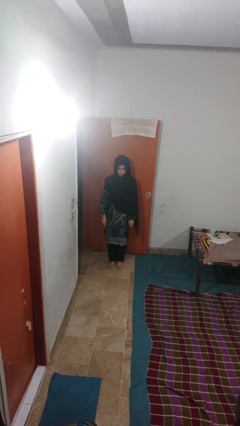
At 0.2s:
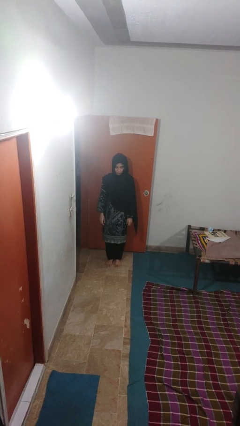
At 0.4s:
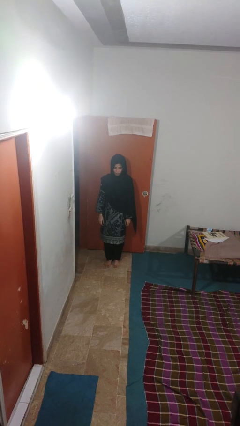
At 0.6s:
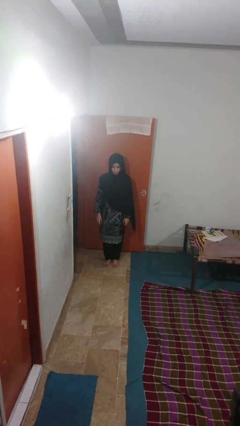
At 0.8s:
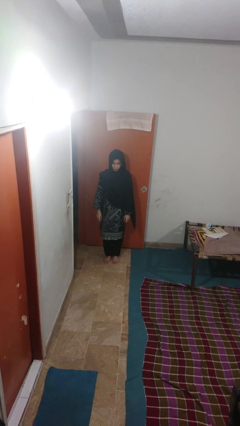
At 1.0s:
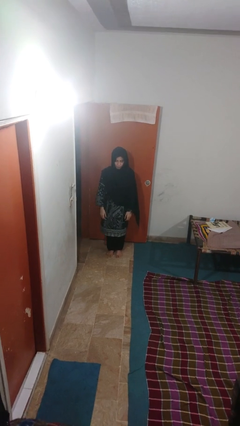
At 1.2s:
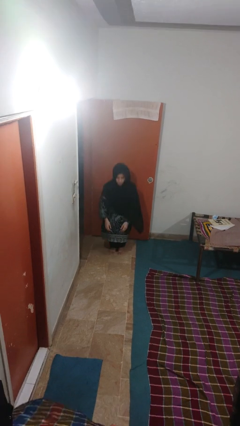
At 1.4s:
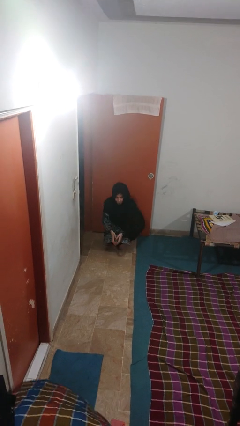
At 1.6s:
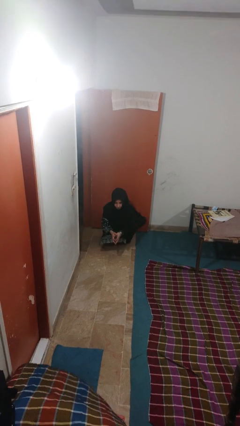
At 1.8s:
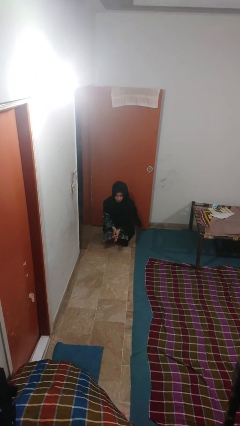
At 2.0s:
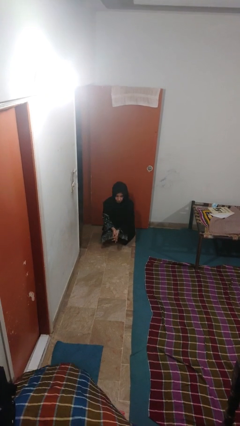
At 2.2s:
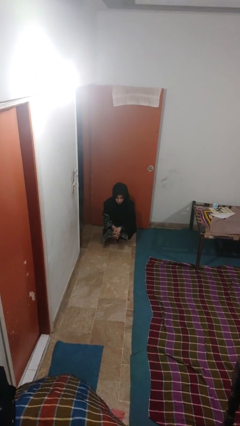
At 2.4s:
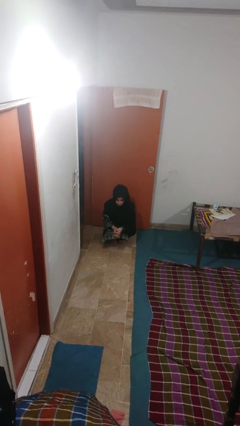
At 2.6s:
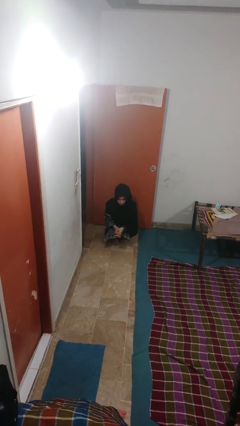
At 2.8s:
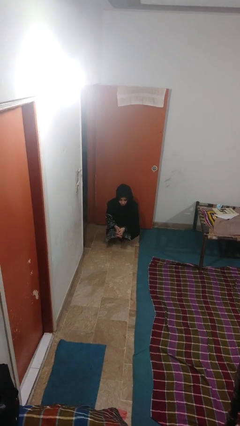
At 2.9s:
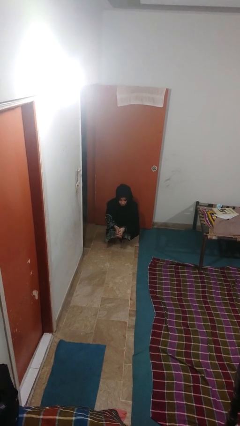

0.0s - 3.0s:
person squats

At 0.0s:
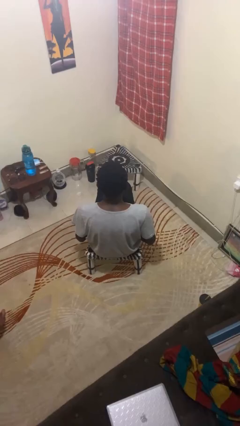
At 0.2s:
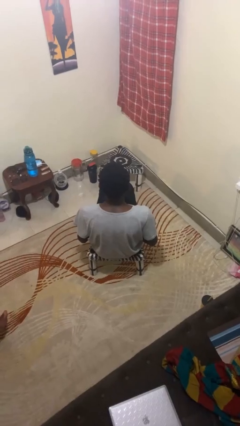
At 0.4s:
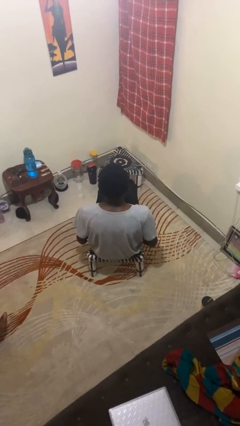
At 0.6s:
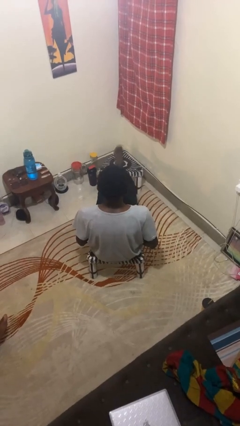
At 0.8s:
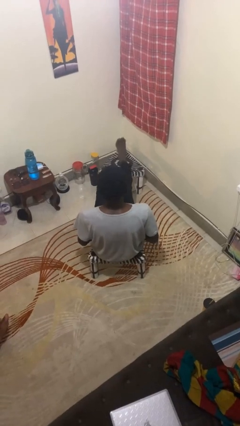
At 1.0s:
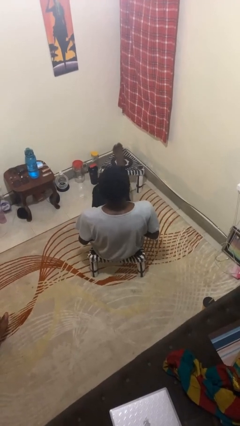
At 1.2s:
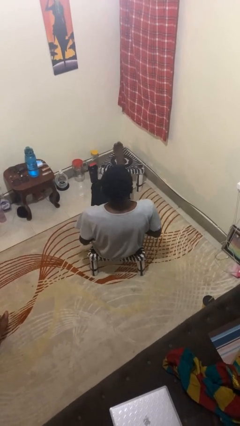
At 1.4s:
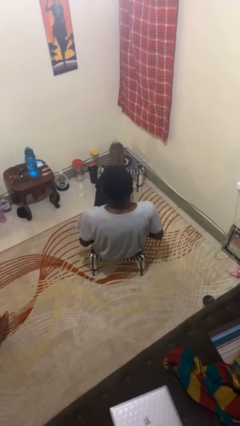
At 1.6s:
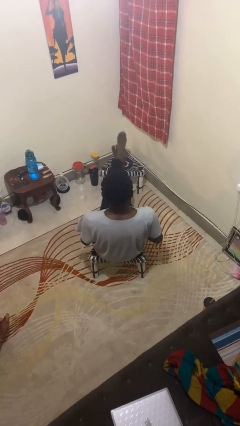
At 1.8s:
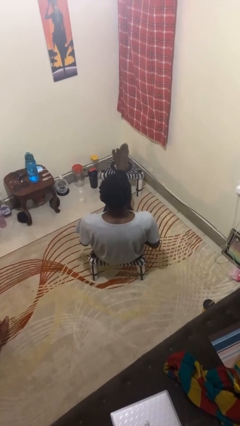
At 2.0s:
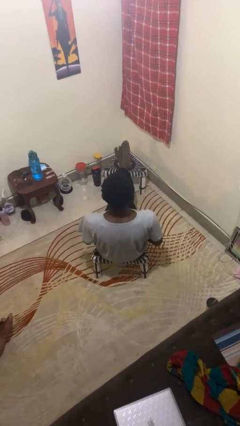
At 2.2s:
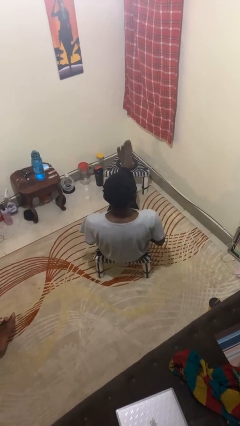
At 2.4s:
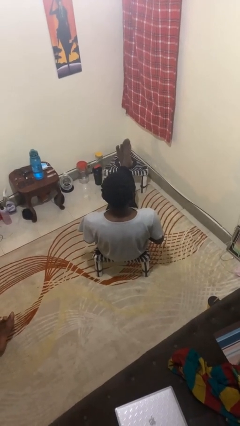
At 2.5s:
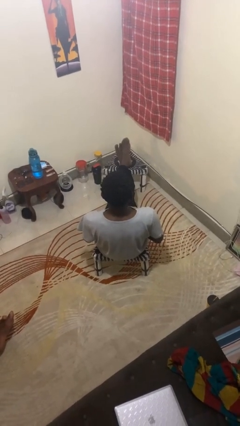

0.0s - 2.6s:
person puts feet up

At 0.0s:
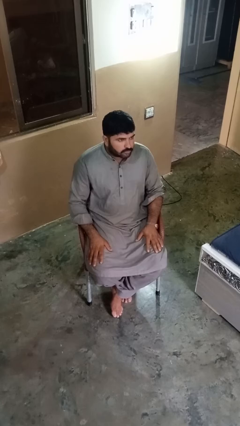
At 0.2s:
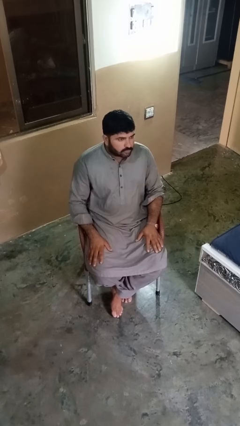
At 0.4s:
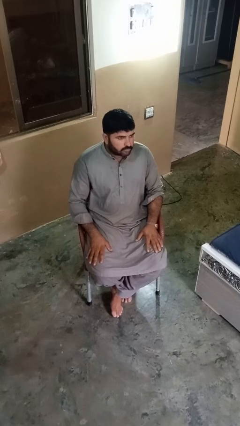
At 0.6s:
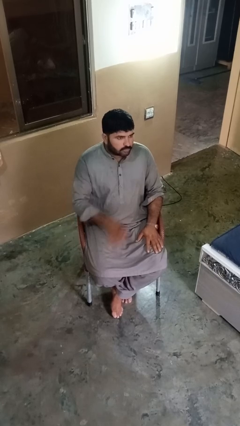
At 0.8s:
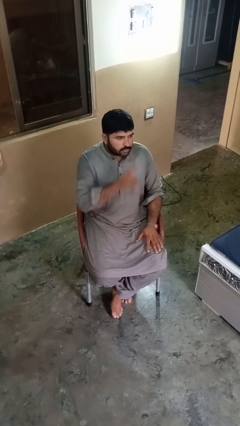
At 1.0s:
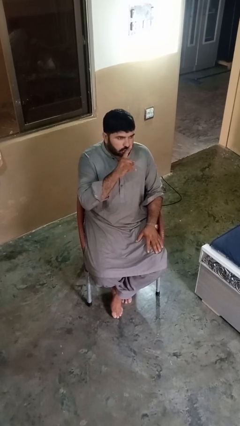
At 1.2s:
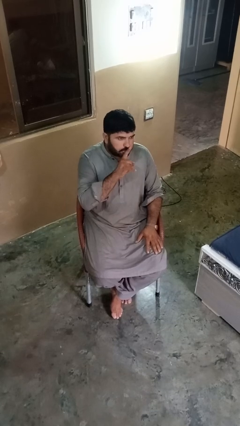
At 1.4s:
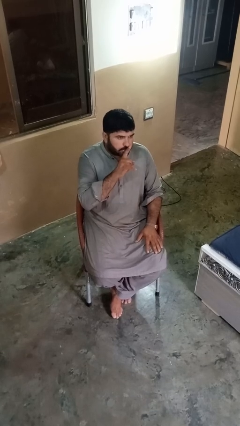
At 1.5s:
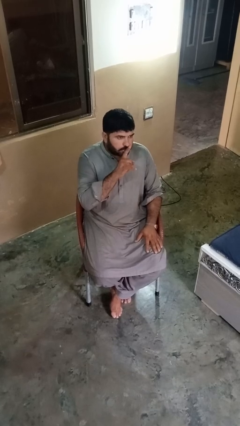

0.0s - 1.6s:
person gestures be quiet

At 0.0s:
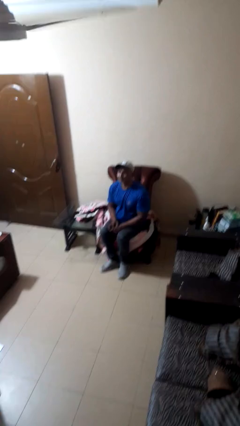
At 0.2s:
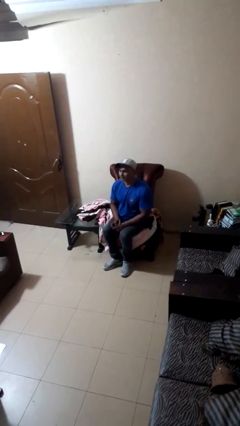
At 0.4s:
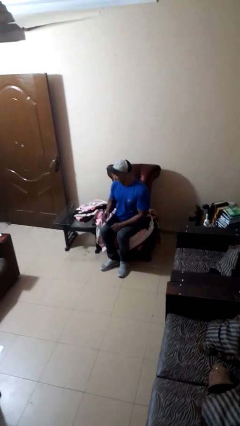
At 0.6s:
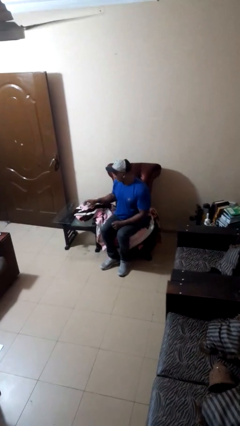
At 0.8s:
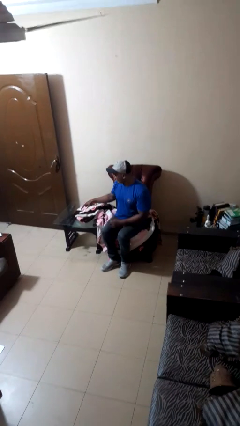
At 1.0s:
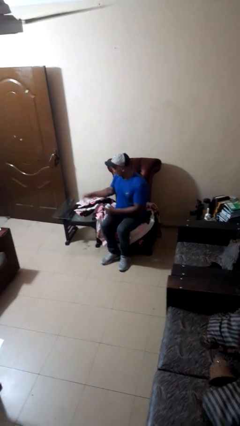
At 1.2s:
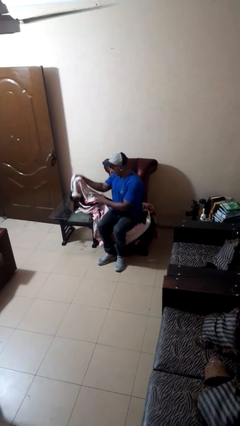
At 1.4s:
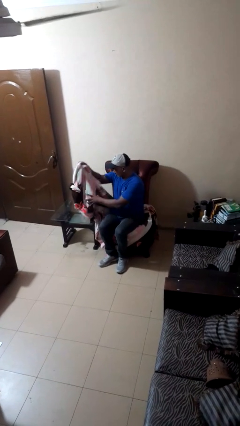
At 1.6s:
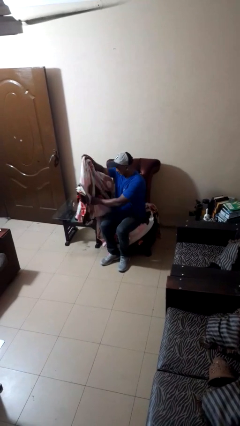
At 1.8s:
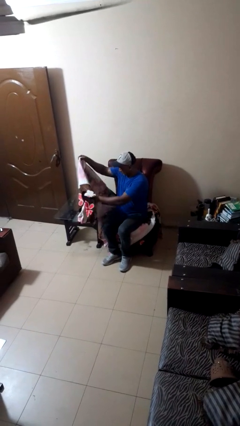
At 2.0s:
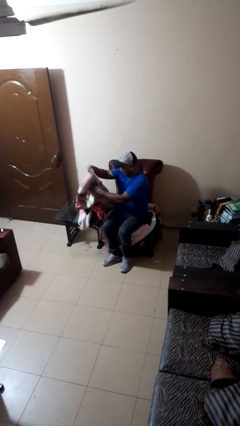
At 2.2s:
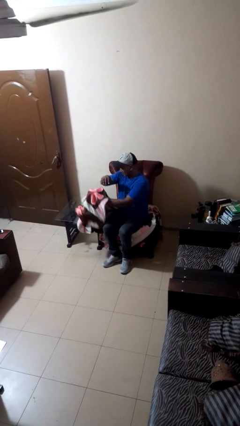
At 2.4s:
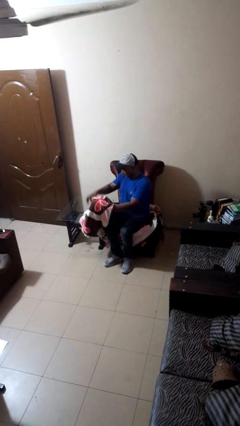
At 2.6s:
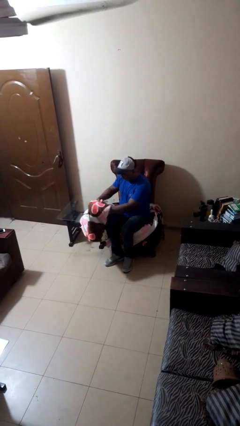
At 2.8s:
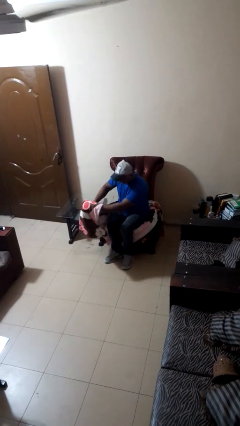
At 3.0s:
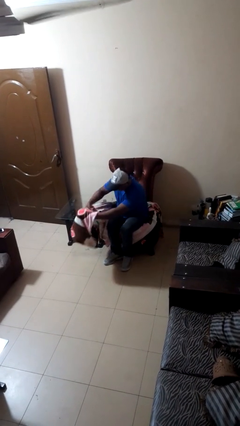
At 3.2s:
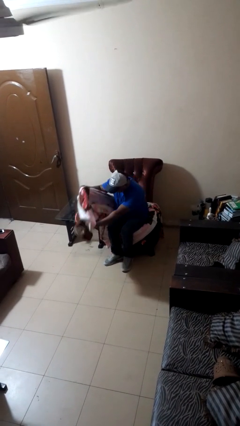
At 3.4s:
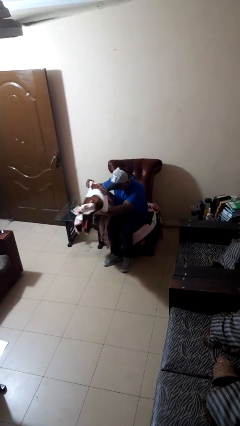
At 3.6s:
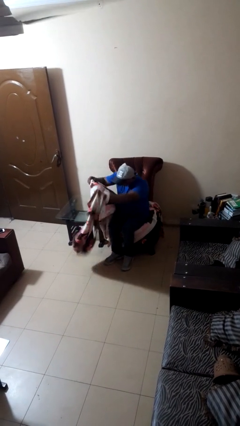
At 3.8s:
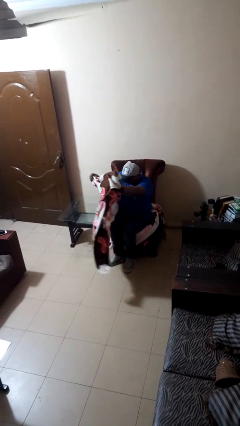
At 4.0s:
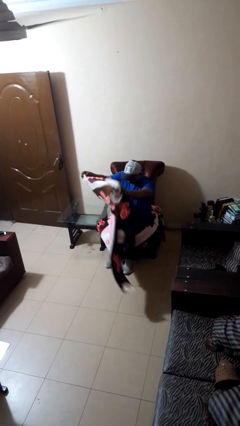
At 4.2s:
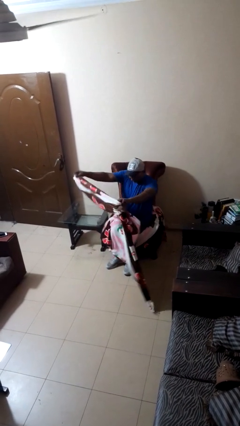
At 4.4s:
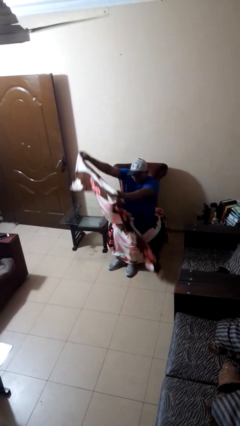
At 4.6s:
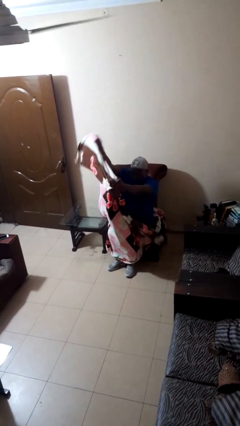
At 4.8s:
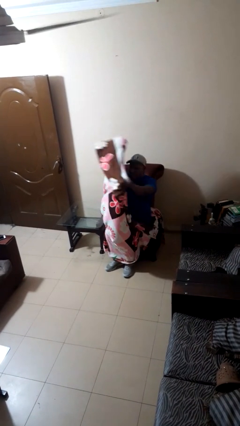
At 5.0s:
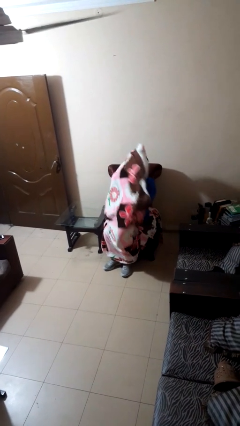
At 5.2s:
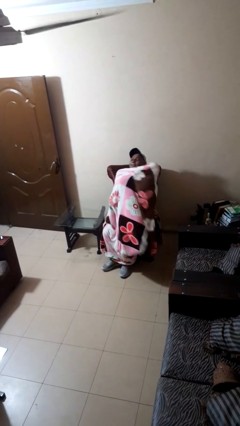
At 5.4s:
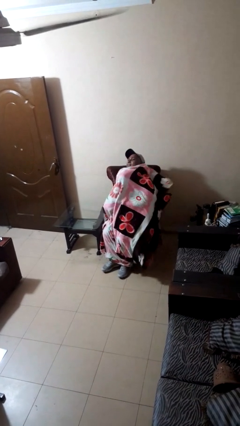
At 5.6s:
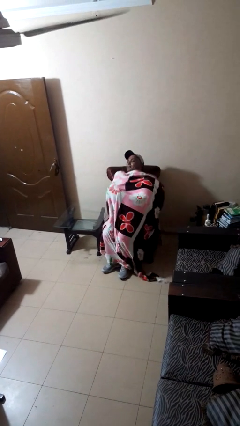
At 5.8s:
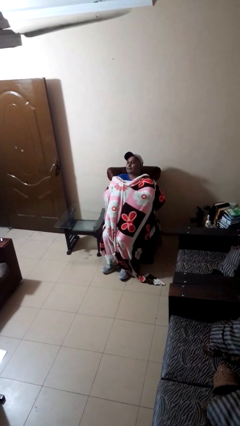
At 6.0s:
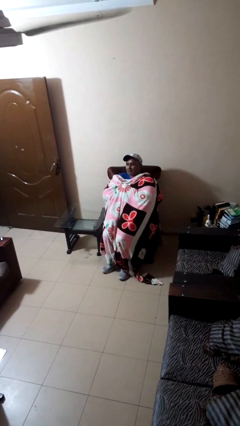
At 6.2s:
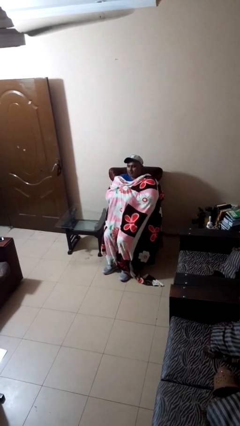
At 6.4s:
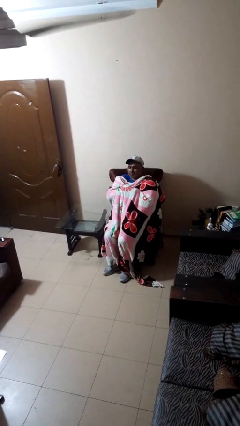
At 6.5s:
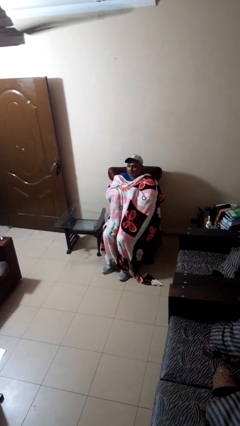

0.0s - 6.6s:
person covers with blanket

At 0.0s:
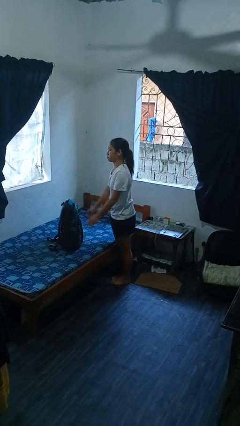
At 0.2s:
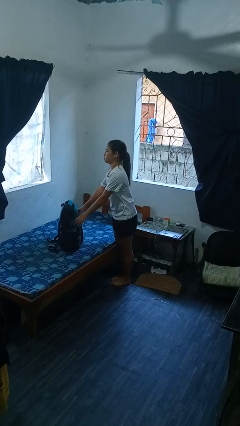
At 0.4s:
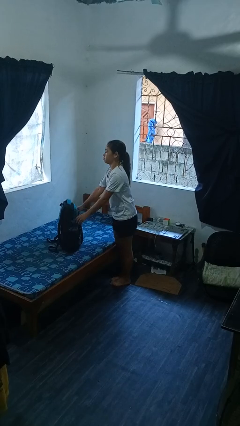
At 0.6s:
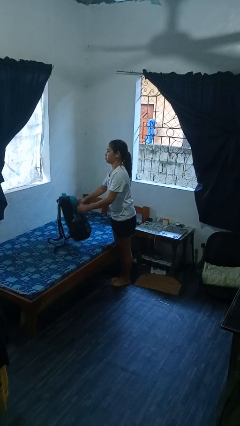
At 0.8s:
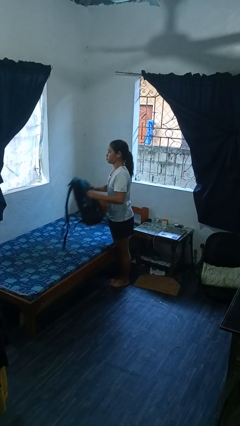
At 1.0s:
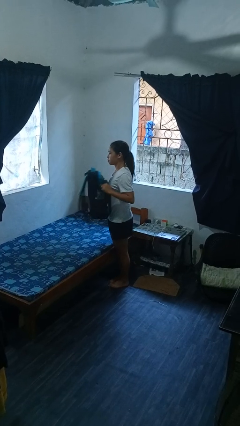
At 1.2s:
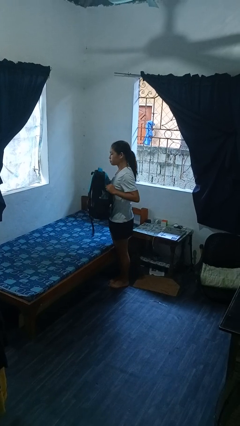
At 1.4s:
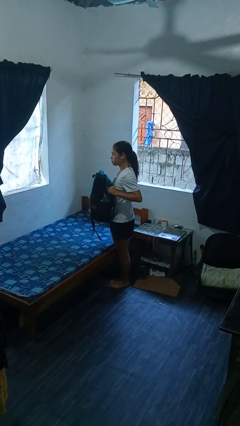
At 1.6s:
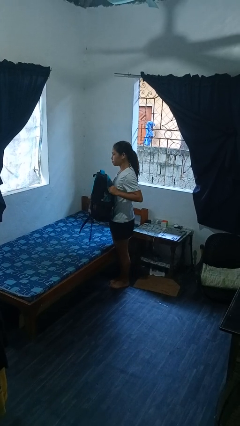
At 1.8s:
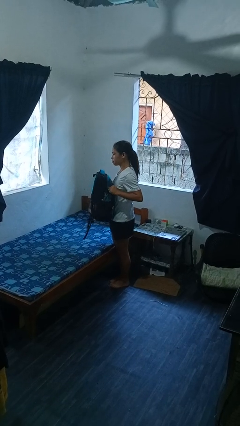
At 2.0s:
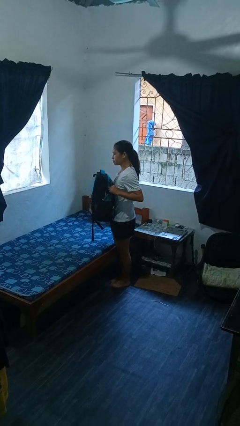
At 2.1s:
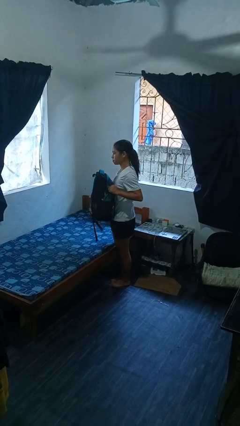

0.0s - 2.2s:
person picks up object from bed

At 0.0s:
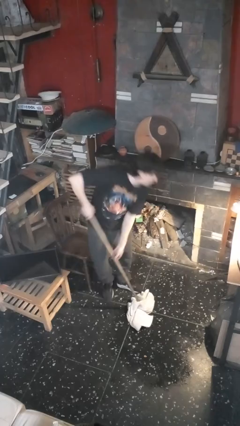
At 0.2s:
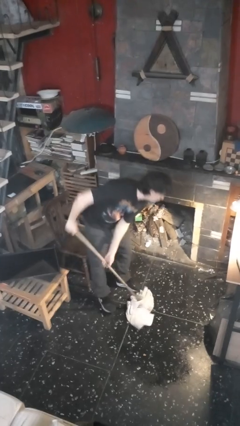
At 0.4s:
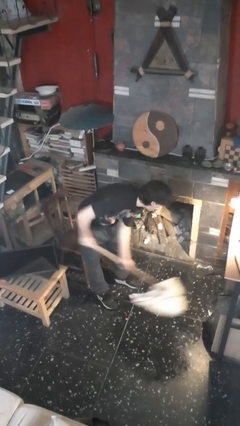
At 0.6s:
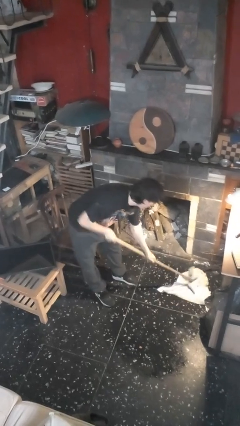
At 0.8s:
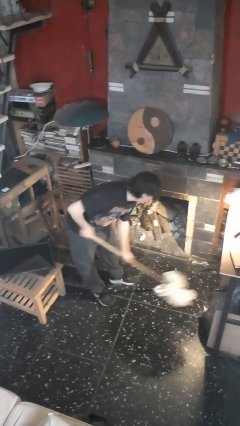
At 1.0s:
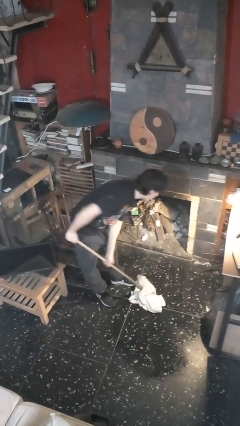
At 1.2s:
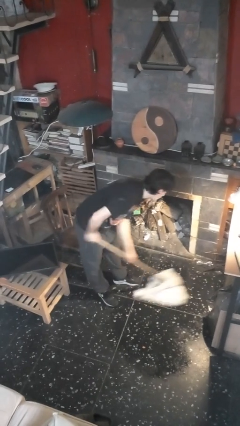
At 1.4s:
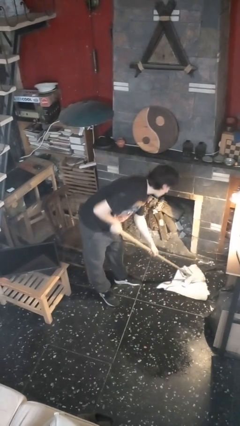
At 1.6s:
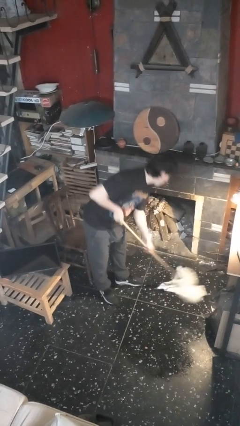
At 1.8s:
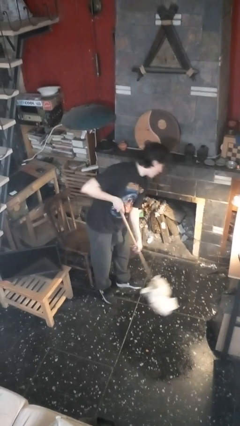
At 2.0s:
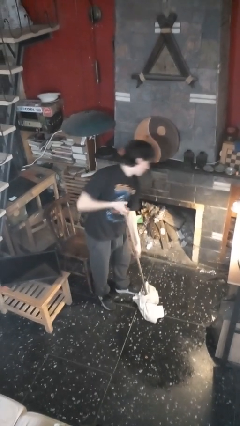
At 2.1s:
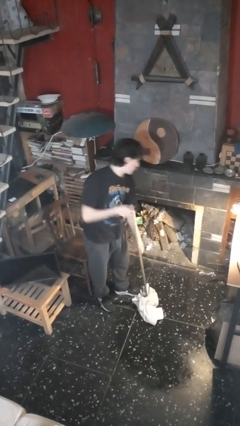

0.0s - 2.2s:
person mops
